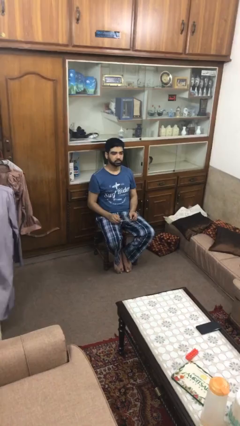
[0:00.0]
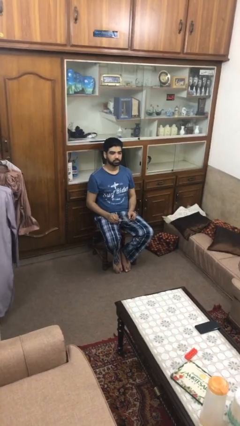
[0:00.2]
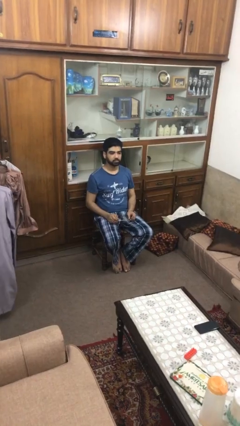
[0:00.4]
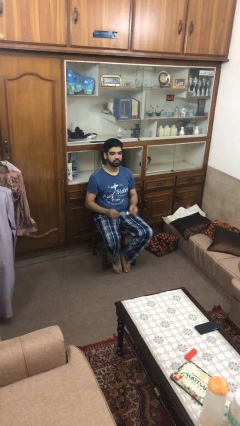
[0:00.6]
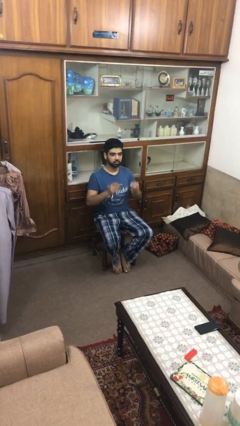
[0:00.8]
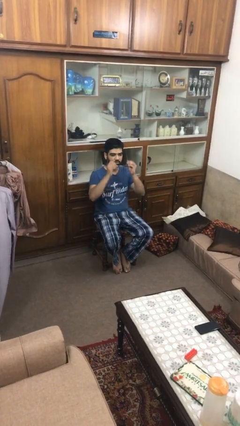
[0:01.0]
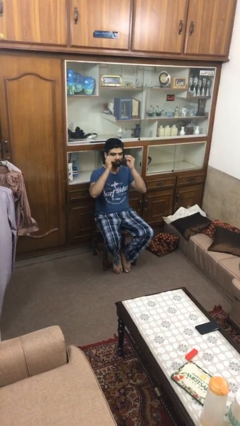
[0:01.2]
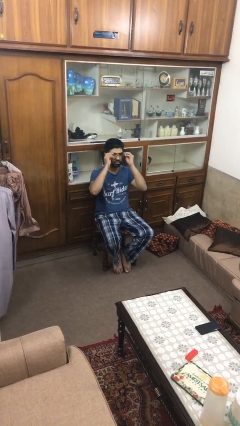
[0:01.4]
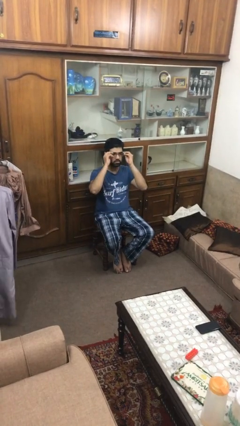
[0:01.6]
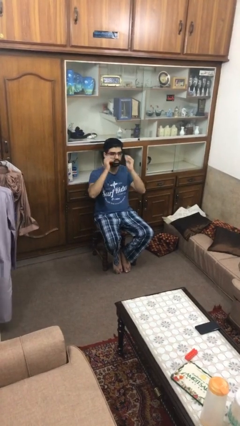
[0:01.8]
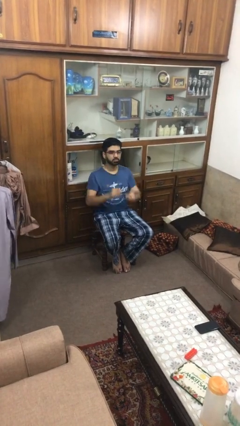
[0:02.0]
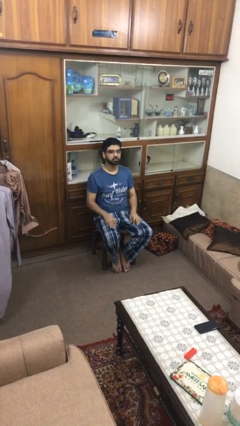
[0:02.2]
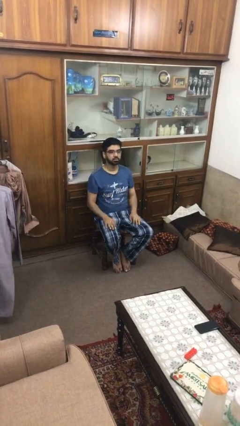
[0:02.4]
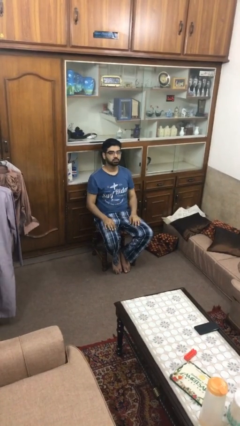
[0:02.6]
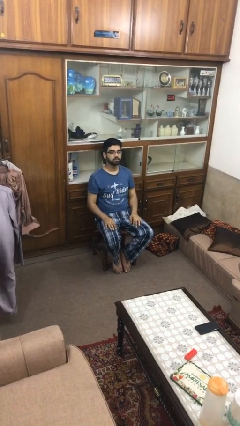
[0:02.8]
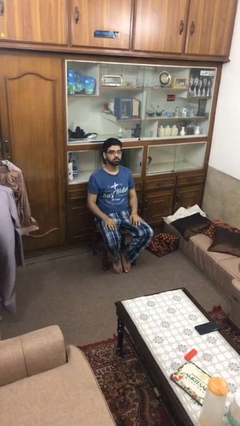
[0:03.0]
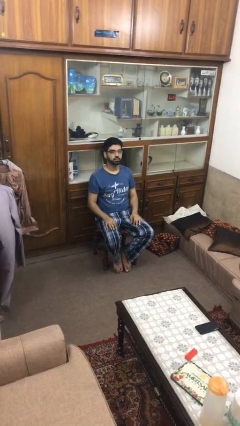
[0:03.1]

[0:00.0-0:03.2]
person puts on glasses

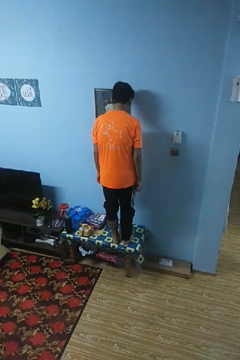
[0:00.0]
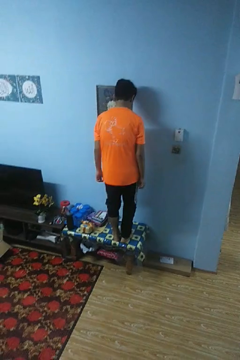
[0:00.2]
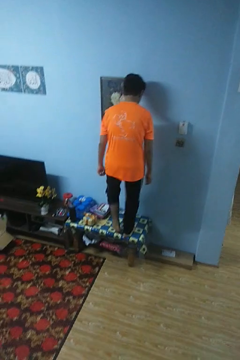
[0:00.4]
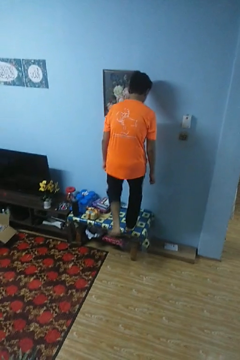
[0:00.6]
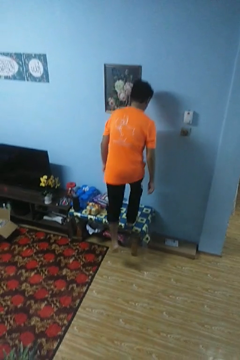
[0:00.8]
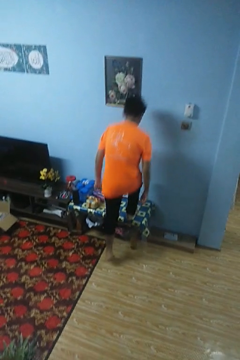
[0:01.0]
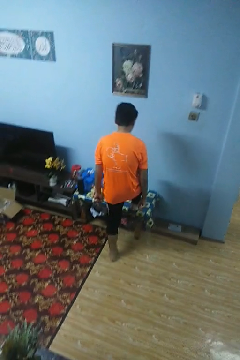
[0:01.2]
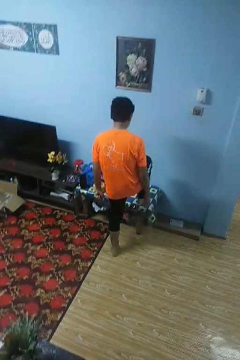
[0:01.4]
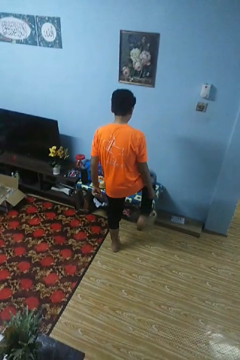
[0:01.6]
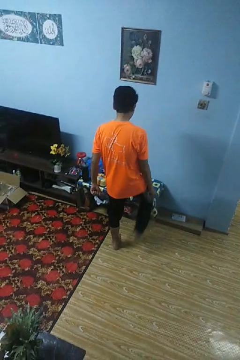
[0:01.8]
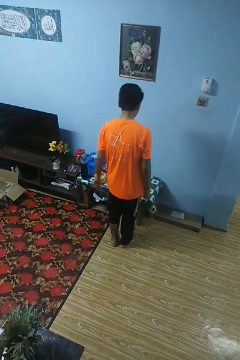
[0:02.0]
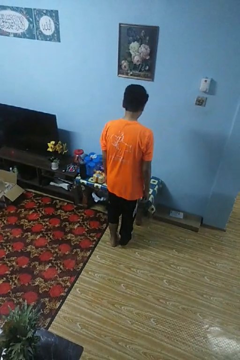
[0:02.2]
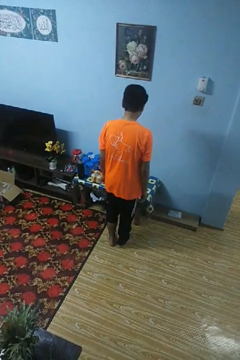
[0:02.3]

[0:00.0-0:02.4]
person climbs off table

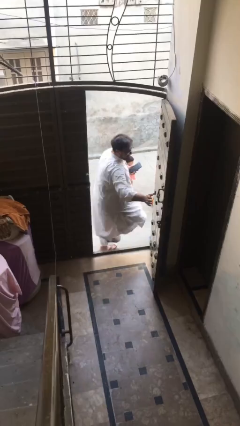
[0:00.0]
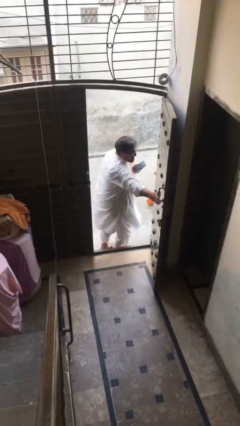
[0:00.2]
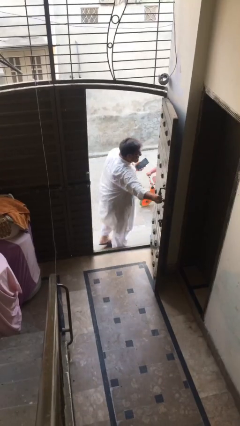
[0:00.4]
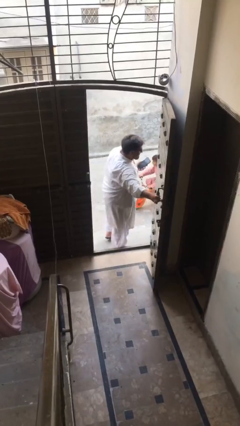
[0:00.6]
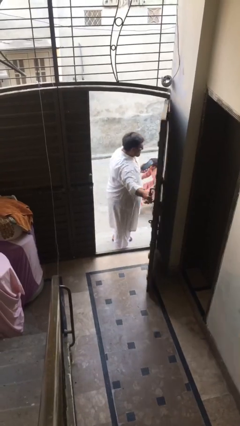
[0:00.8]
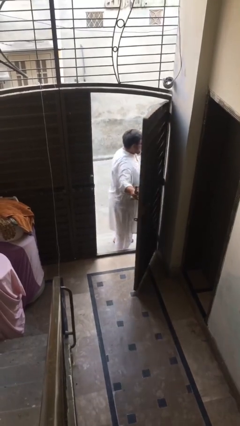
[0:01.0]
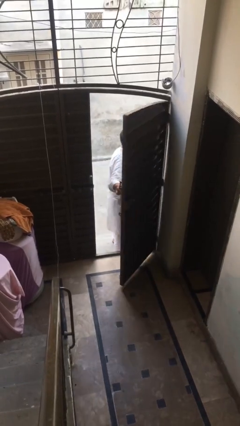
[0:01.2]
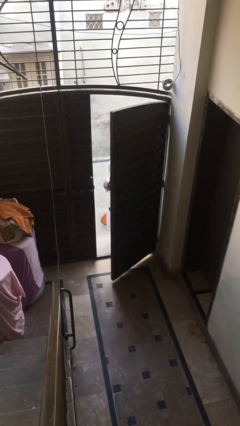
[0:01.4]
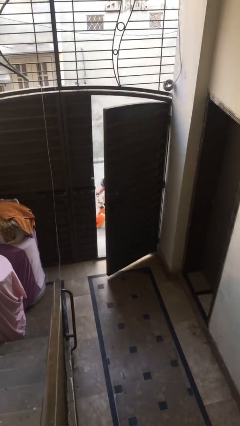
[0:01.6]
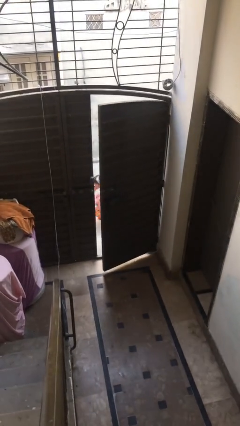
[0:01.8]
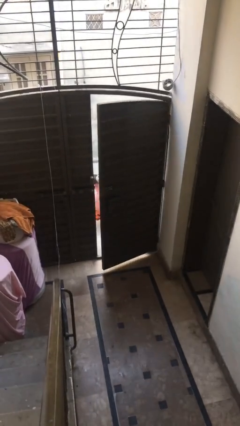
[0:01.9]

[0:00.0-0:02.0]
person closes facility door

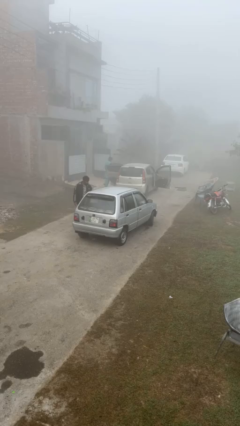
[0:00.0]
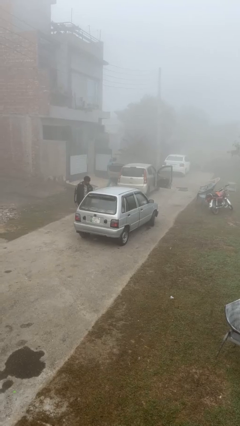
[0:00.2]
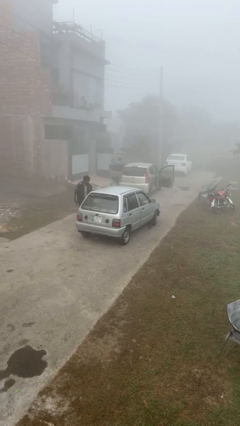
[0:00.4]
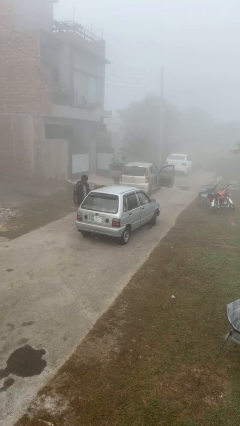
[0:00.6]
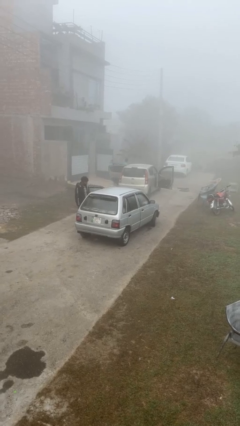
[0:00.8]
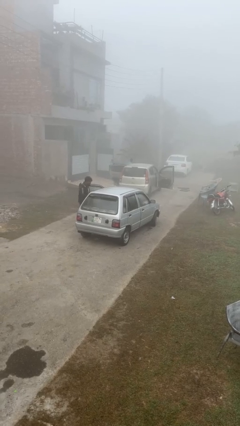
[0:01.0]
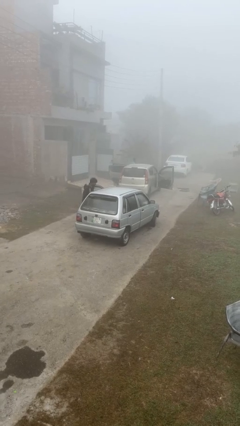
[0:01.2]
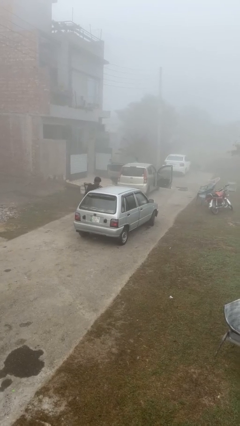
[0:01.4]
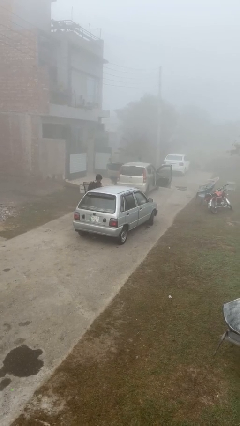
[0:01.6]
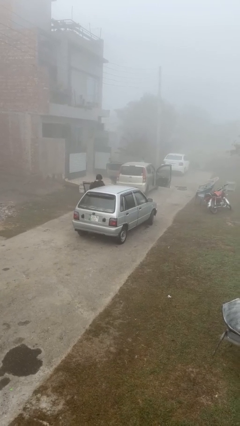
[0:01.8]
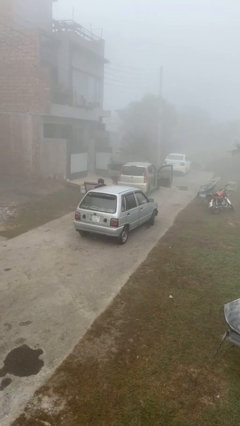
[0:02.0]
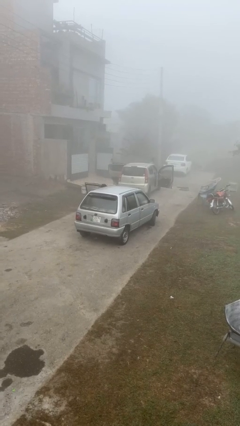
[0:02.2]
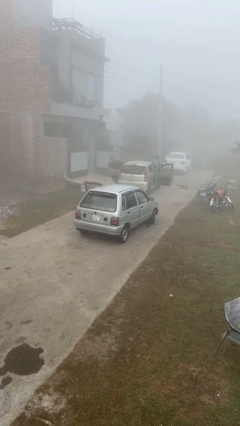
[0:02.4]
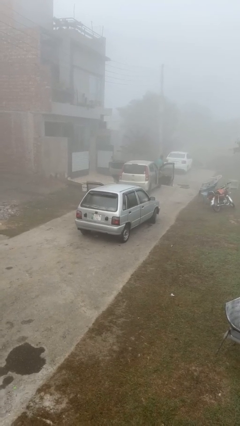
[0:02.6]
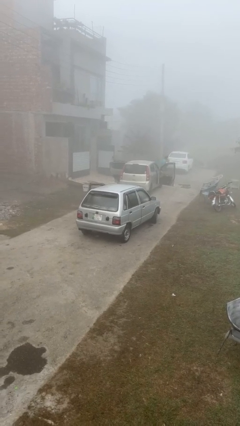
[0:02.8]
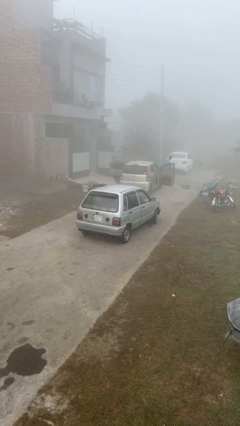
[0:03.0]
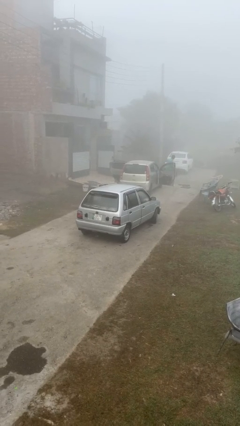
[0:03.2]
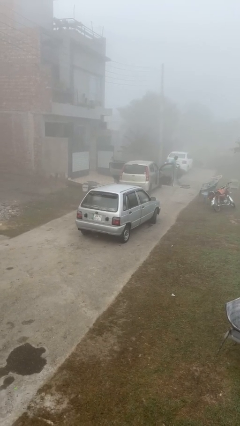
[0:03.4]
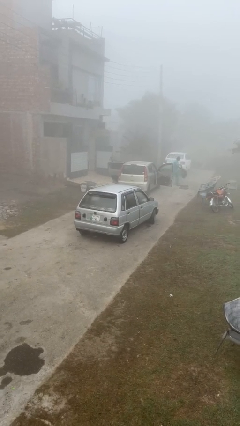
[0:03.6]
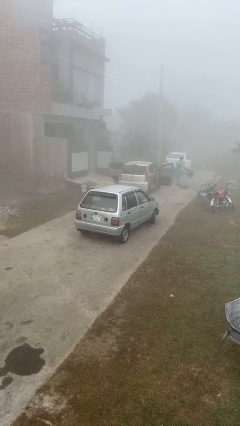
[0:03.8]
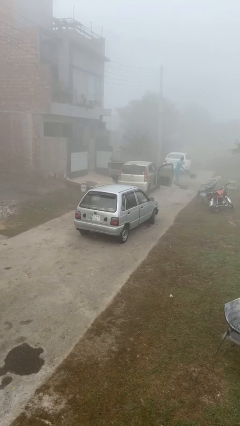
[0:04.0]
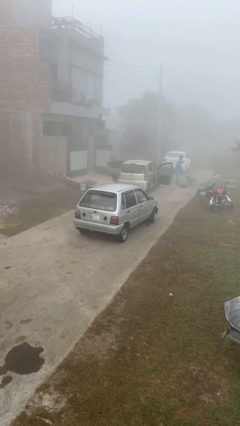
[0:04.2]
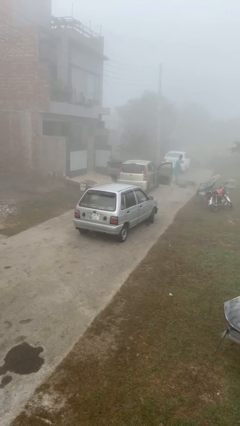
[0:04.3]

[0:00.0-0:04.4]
car picks up person

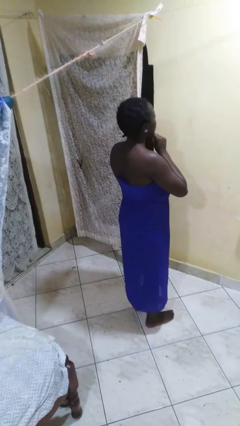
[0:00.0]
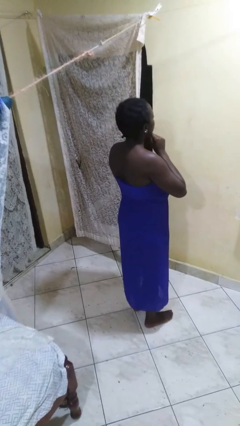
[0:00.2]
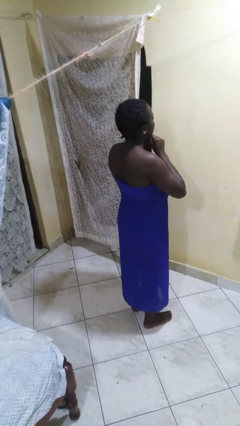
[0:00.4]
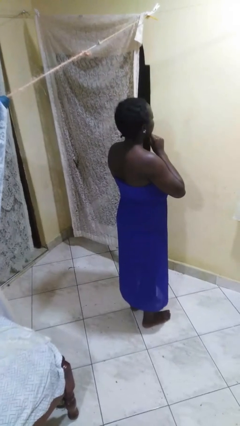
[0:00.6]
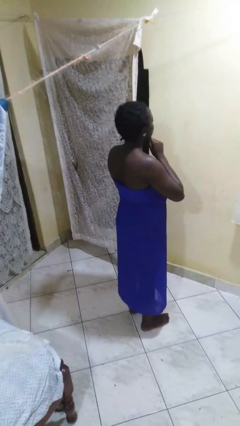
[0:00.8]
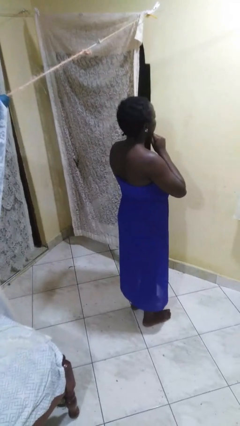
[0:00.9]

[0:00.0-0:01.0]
person strokes chin

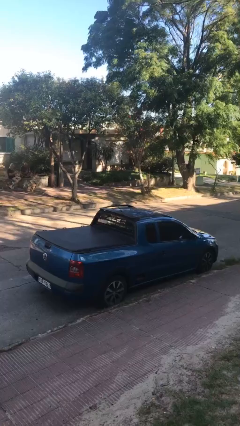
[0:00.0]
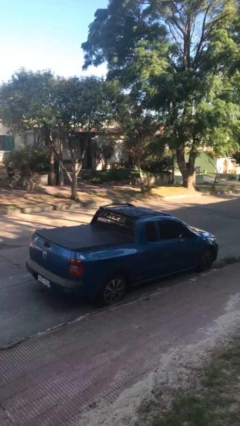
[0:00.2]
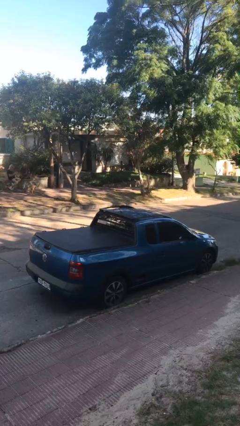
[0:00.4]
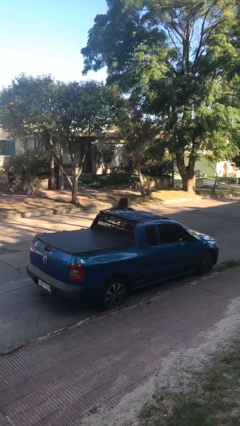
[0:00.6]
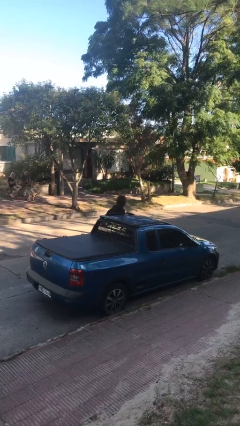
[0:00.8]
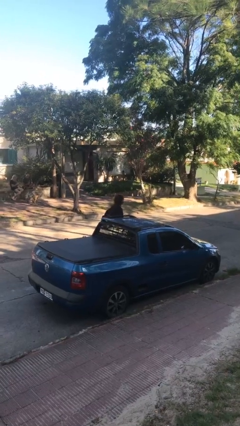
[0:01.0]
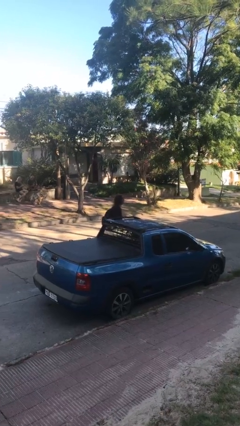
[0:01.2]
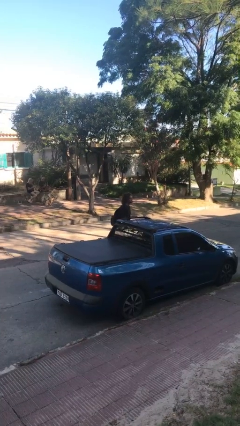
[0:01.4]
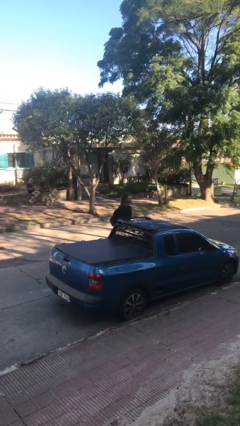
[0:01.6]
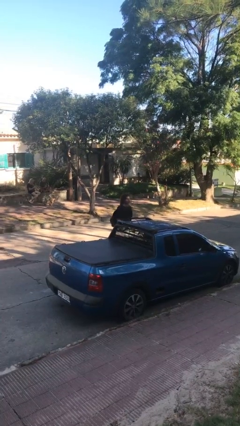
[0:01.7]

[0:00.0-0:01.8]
person exits car

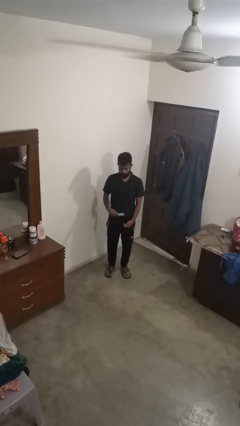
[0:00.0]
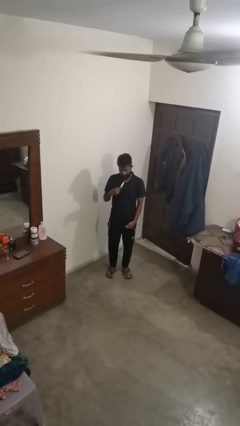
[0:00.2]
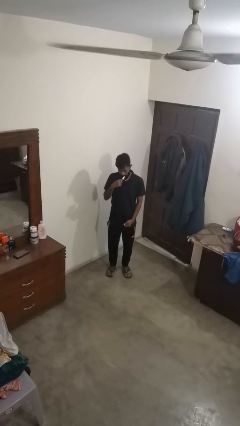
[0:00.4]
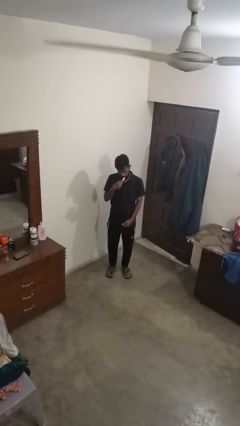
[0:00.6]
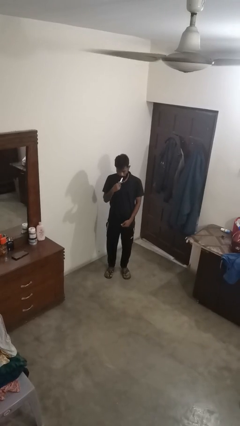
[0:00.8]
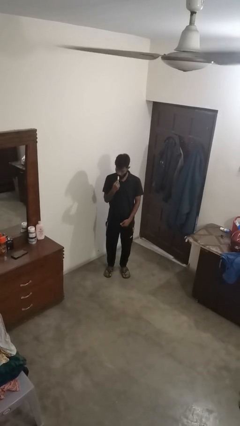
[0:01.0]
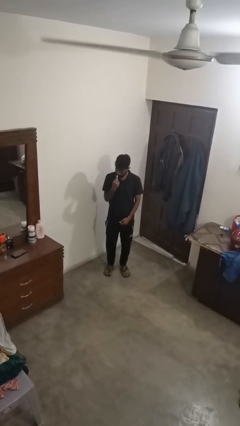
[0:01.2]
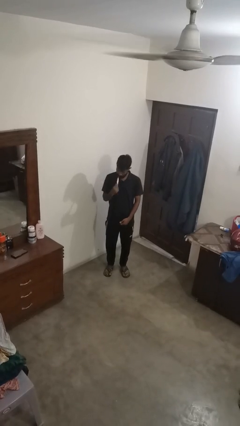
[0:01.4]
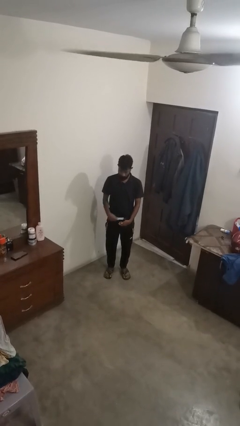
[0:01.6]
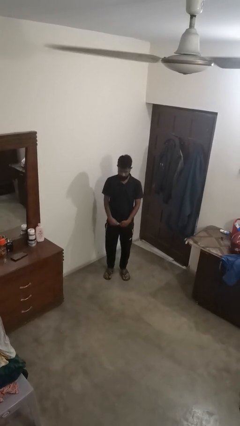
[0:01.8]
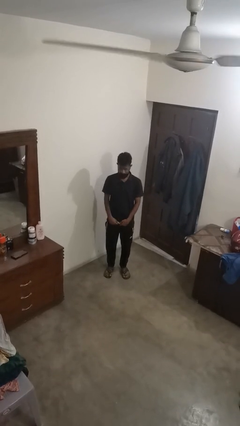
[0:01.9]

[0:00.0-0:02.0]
person brushes teeth

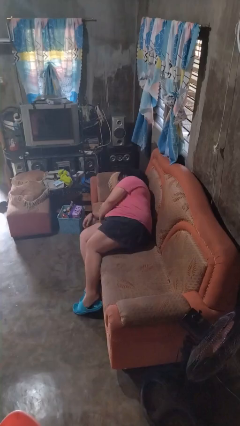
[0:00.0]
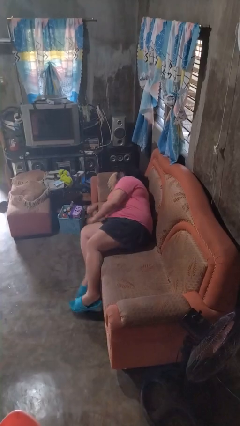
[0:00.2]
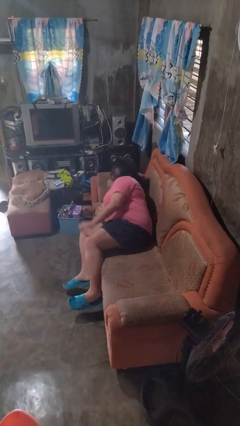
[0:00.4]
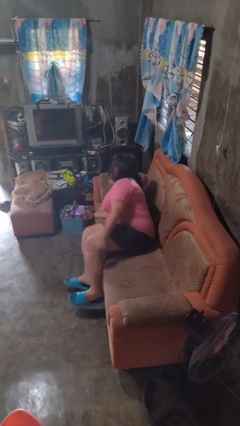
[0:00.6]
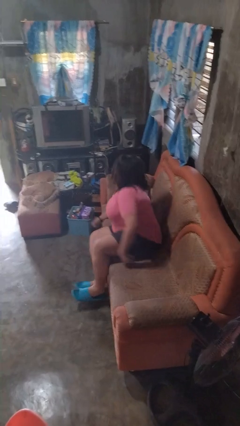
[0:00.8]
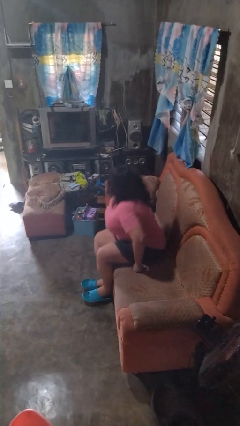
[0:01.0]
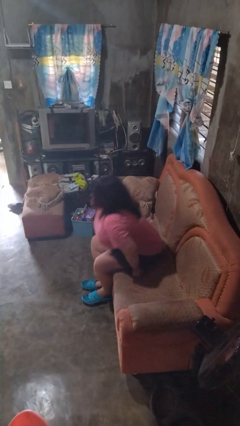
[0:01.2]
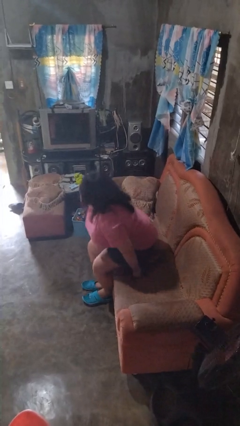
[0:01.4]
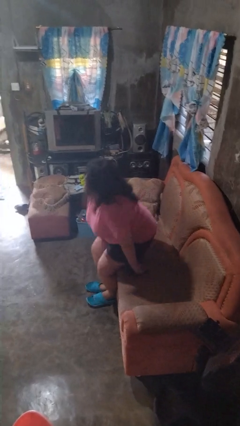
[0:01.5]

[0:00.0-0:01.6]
person stands up
